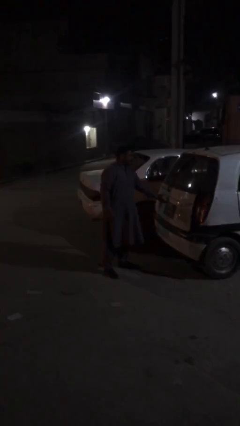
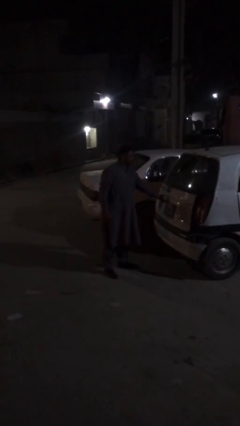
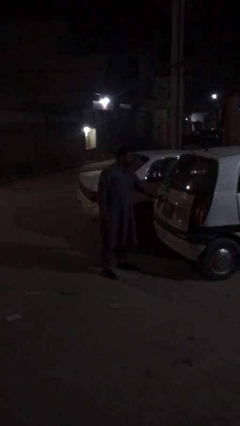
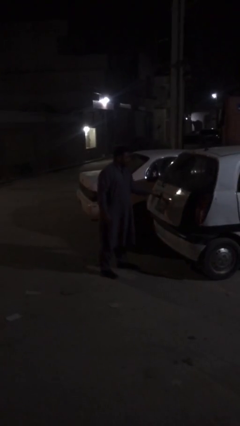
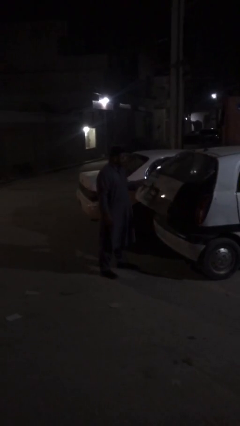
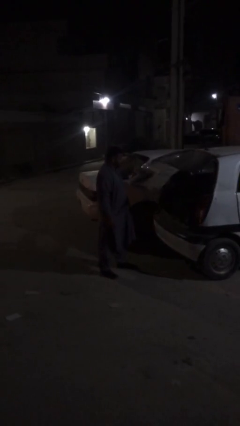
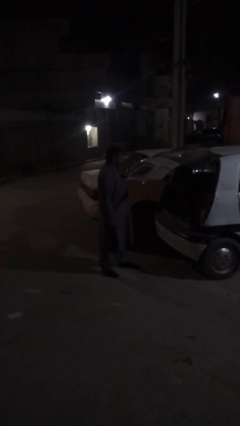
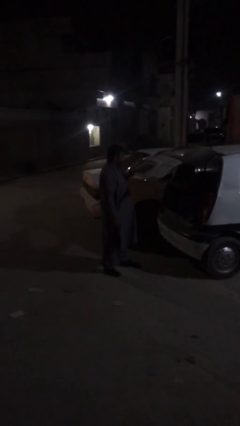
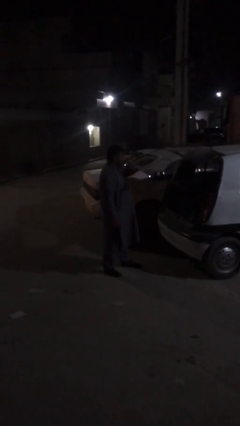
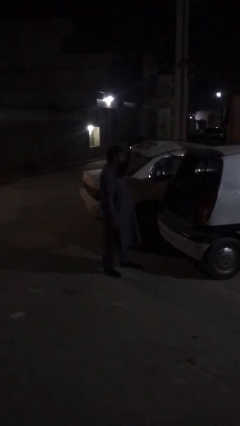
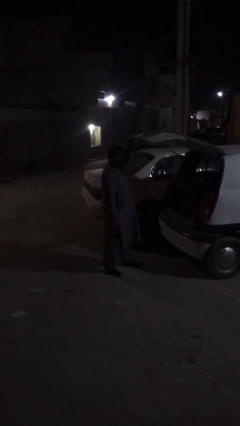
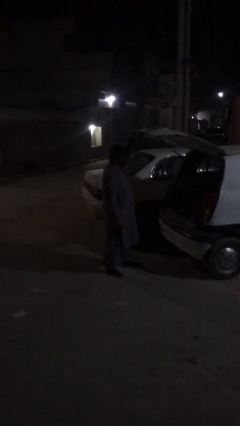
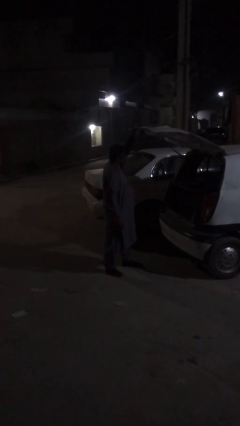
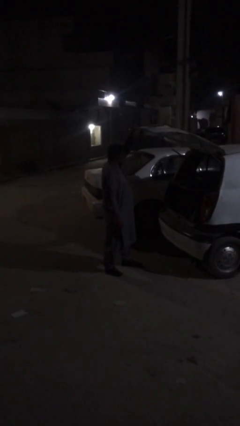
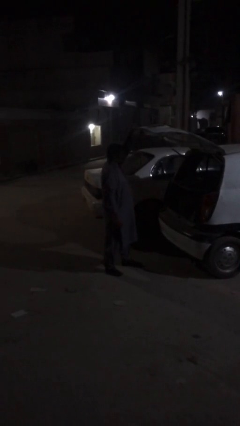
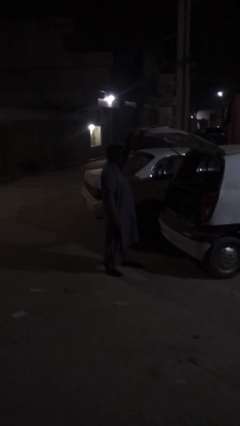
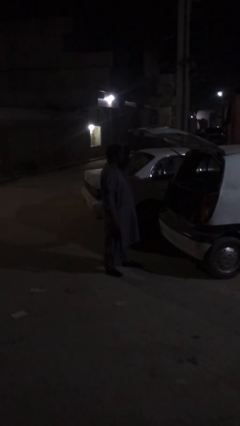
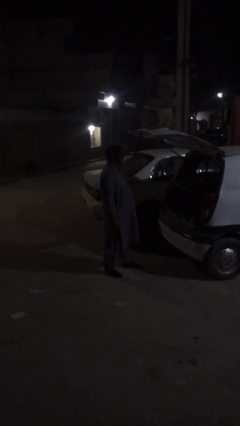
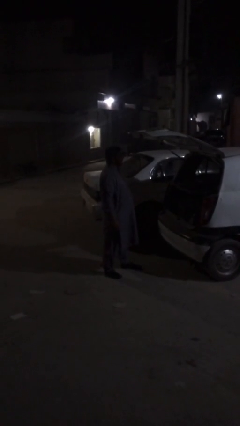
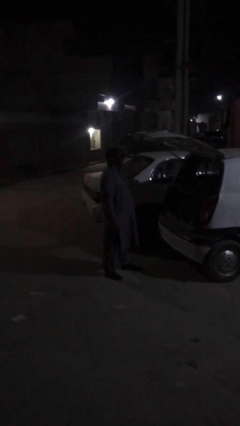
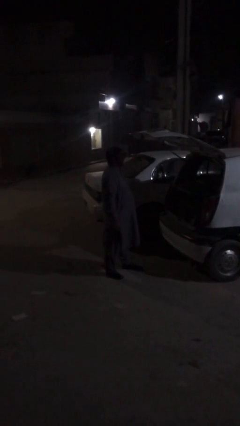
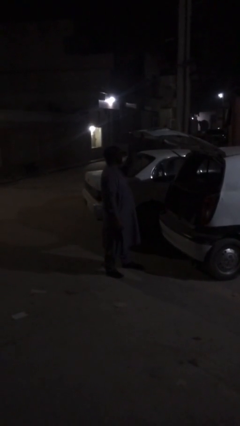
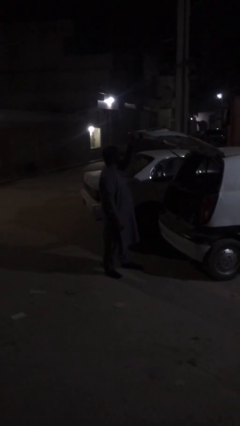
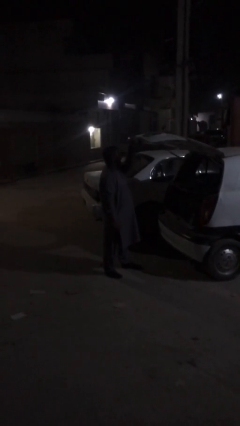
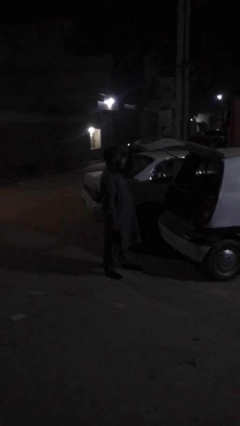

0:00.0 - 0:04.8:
person opens car trunk

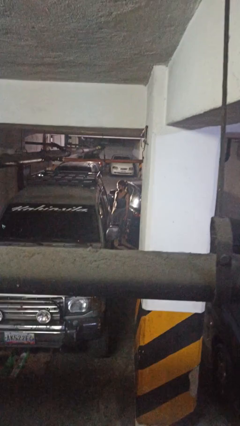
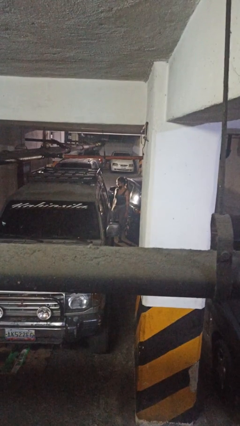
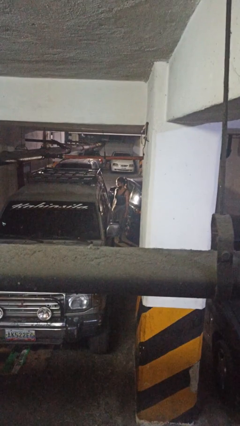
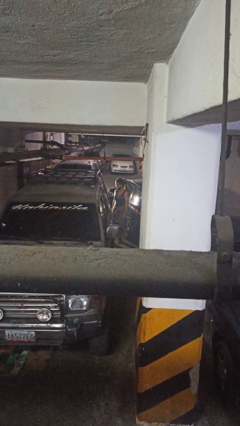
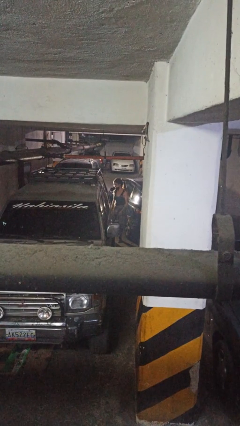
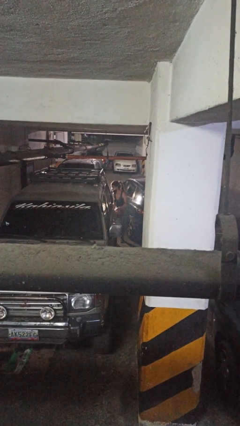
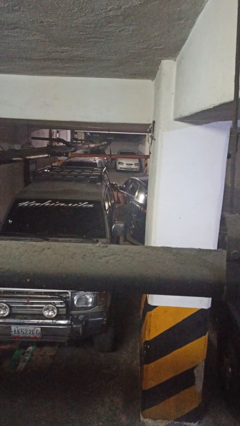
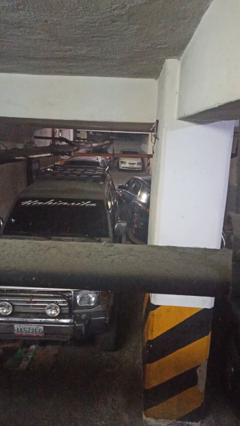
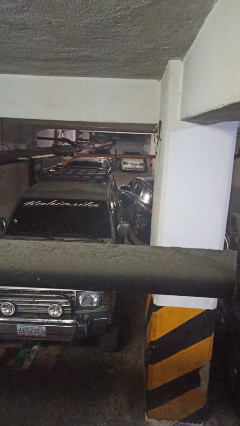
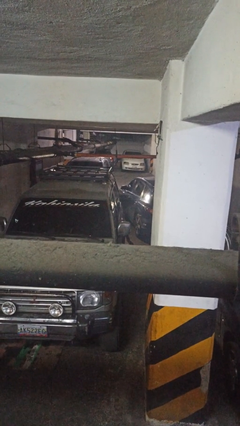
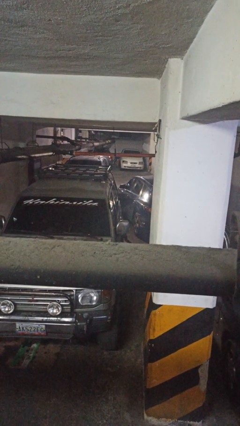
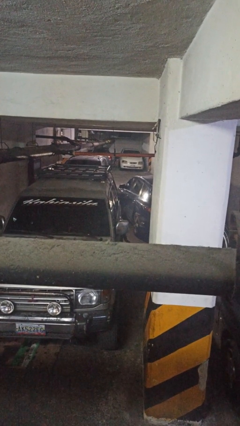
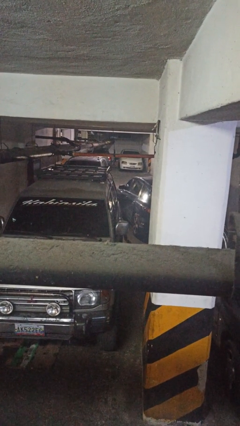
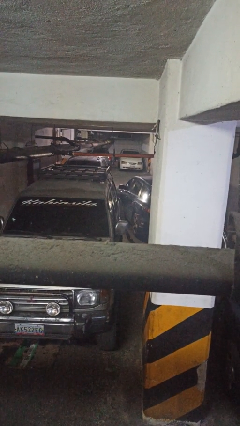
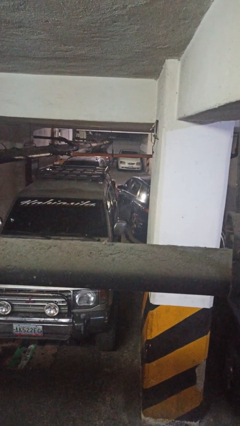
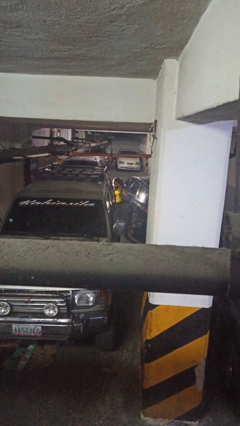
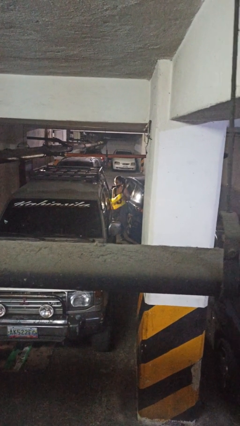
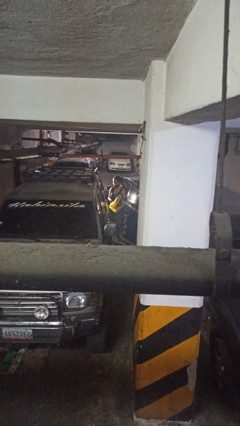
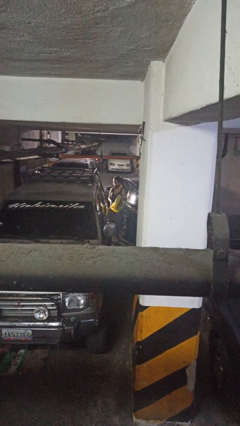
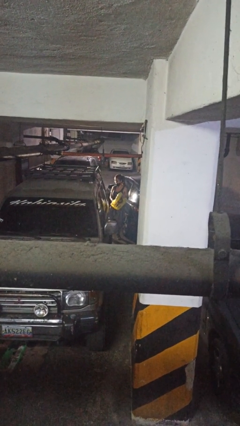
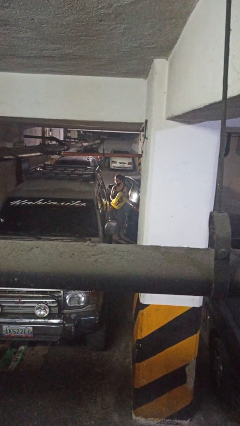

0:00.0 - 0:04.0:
person unloads car

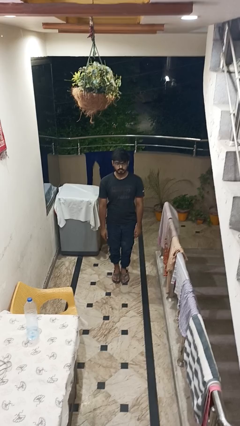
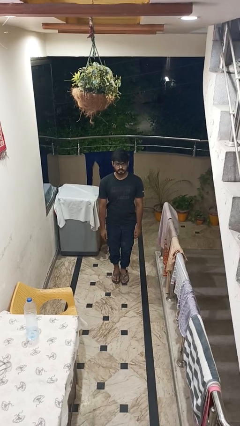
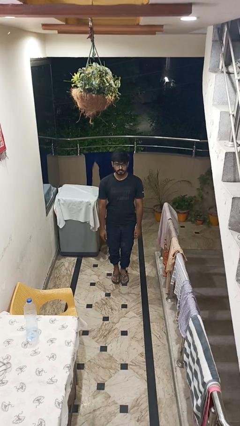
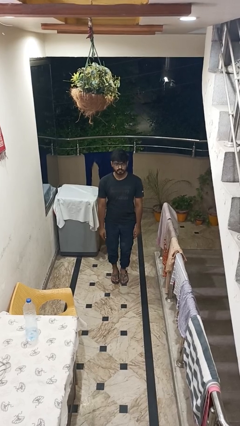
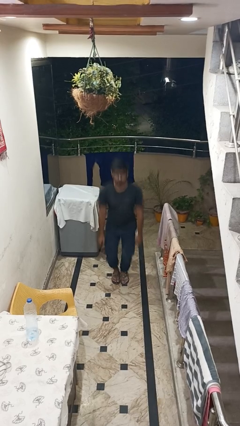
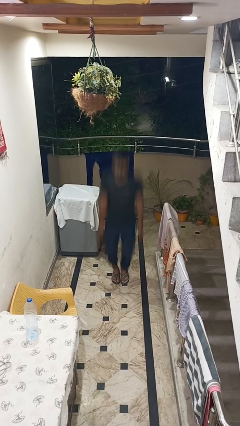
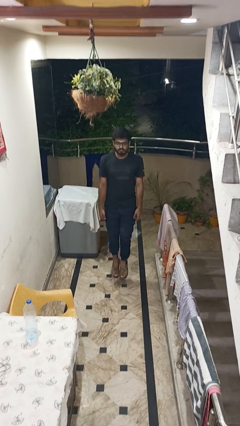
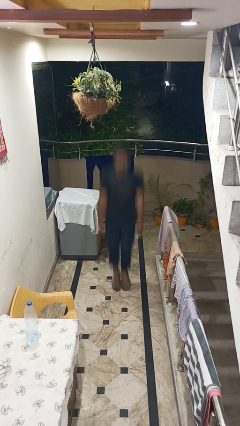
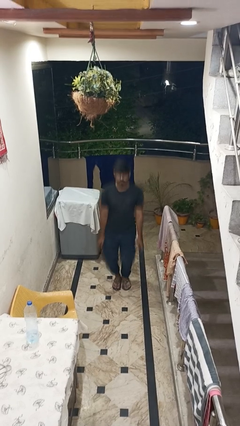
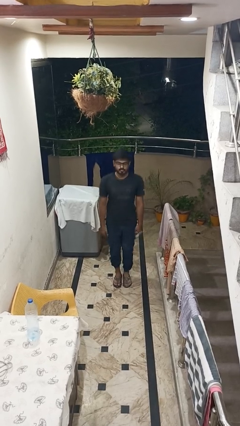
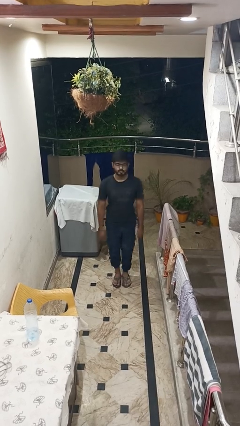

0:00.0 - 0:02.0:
person jumps

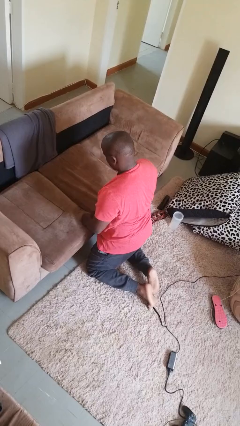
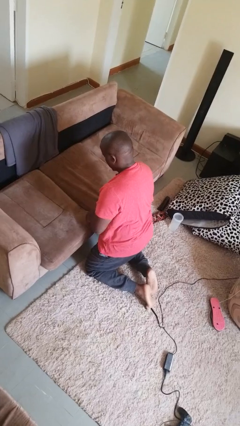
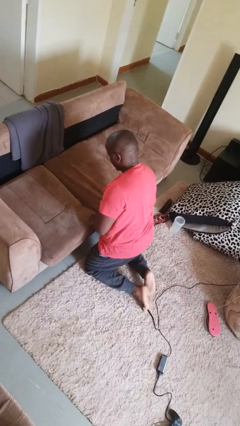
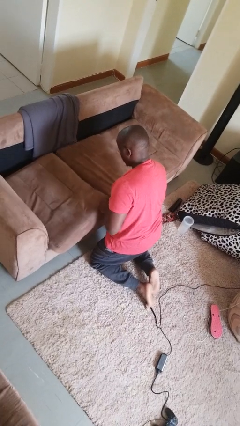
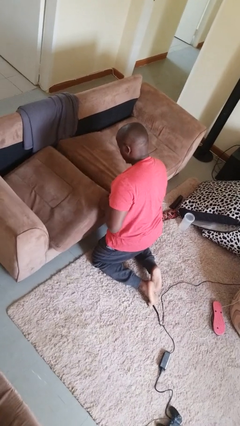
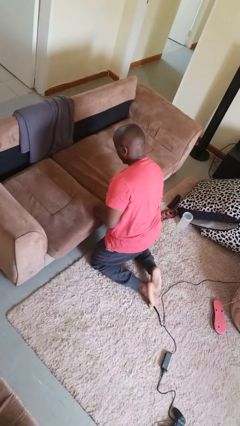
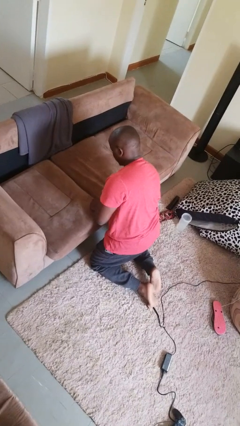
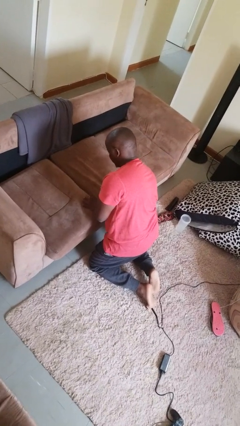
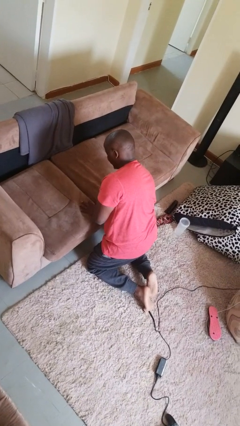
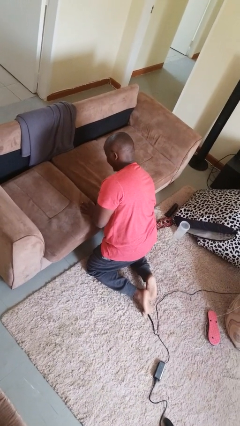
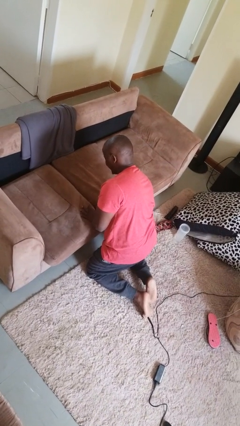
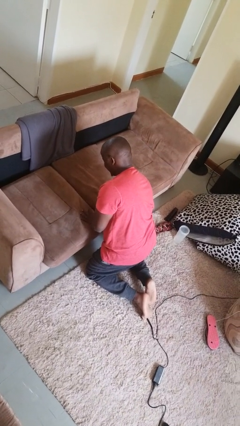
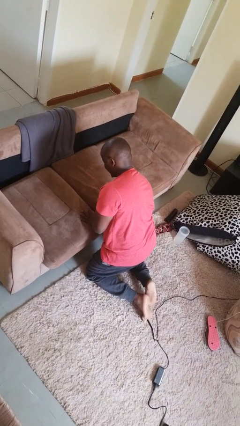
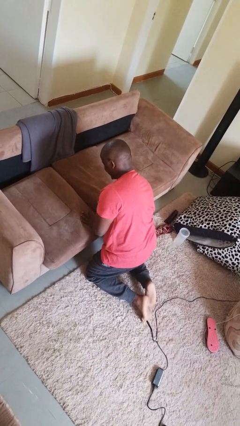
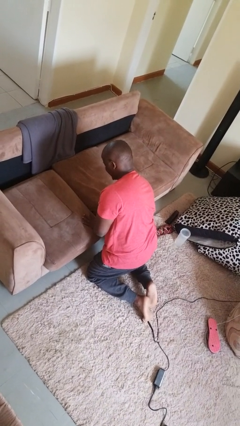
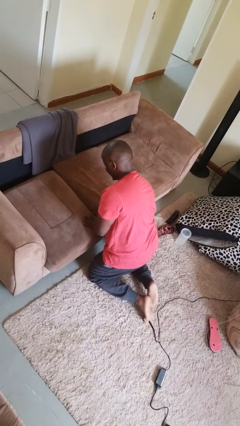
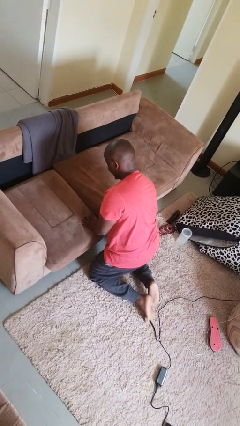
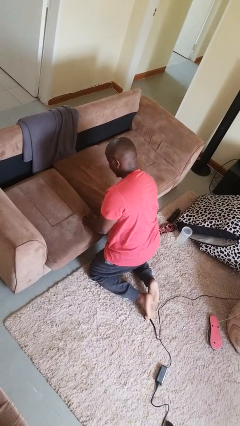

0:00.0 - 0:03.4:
person searches in couch

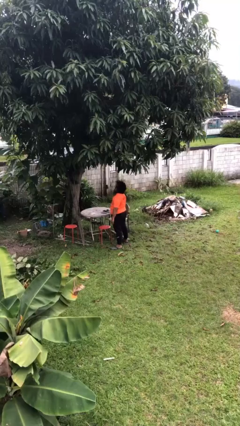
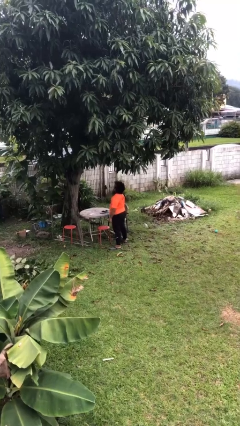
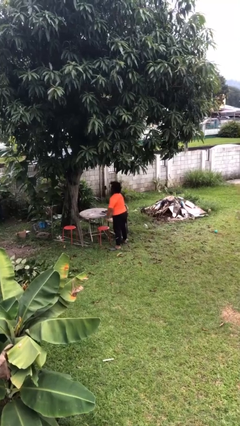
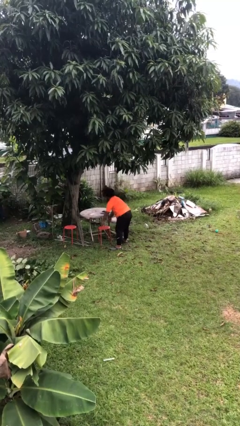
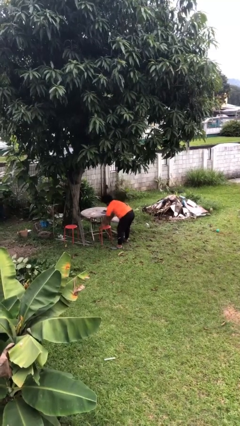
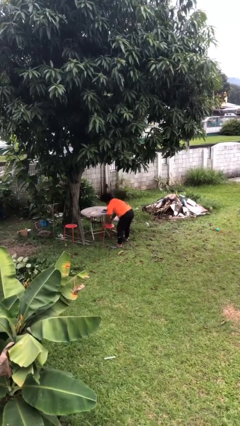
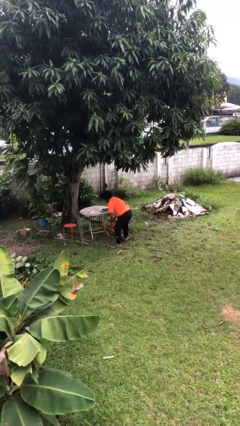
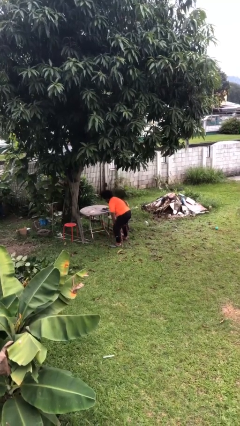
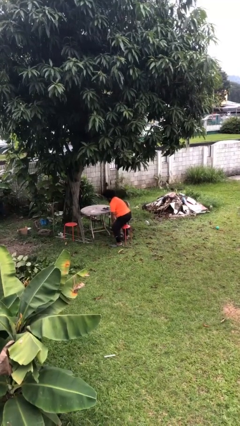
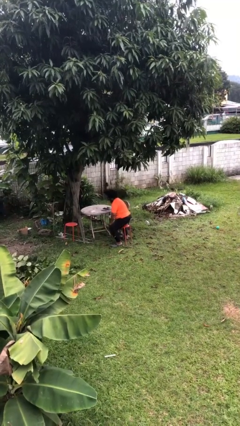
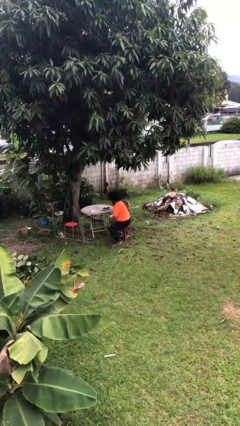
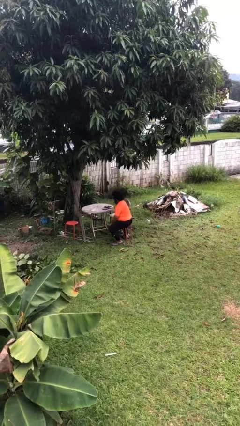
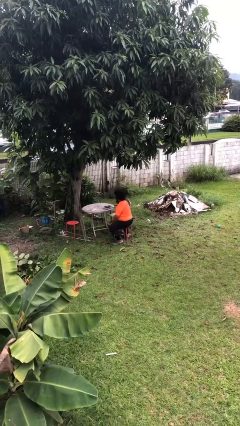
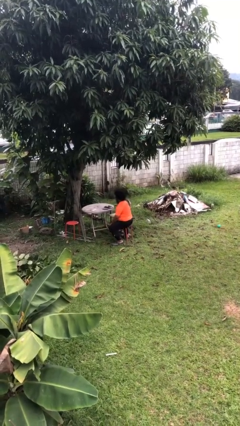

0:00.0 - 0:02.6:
person sits down

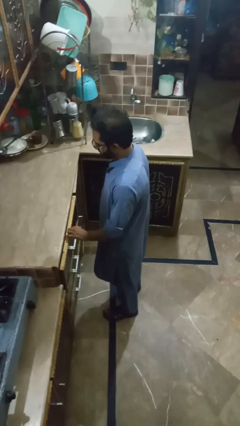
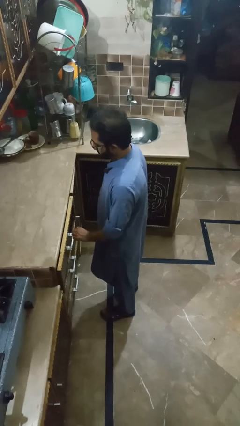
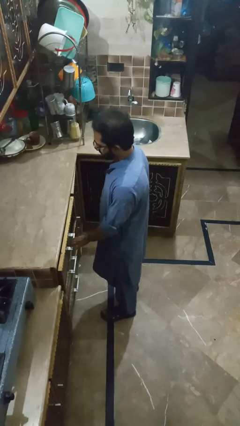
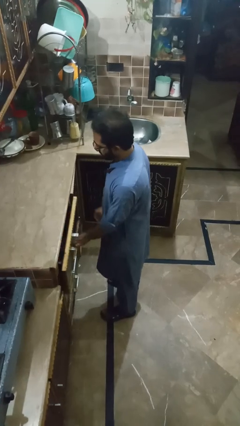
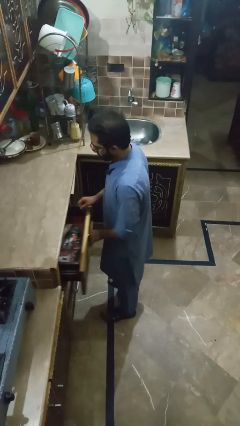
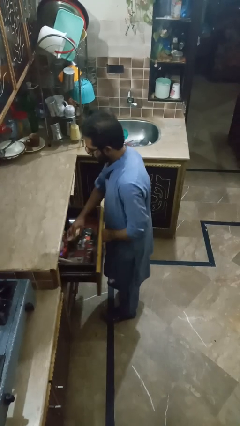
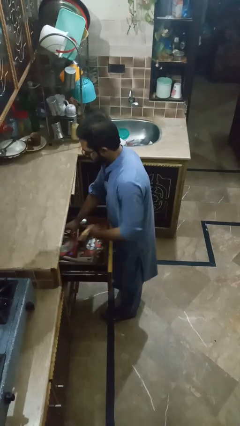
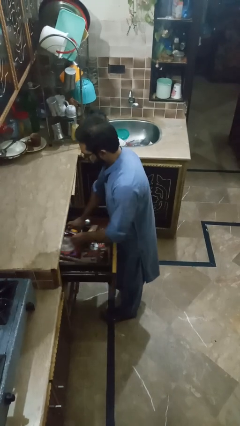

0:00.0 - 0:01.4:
person searches in kitchen drawer
